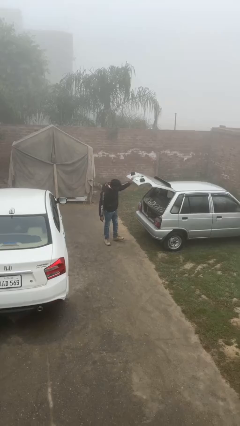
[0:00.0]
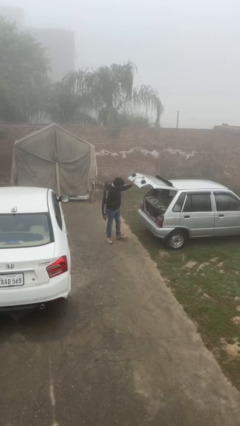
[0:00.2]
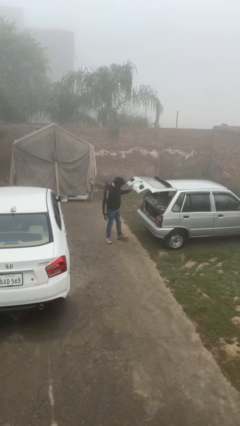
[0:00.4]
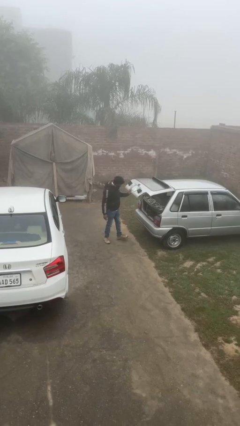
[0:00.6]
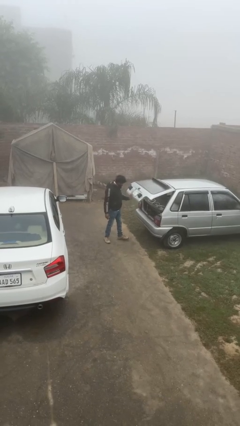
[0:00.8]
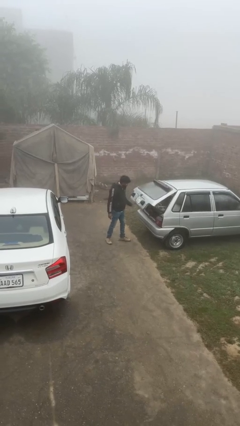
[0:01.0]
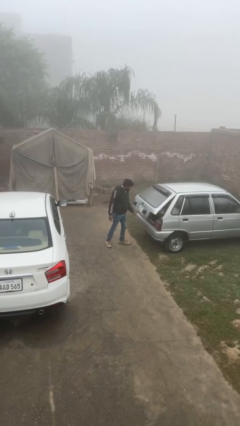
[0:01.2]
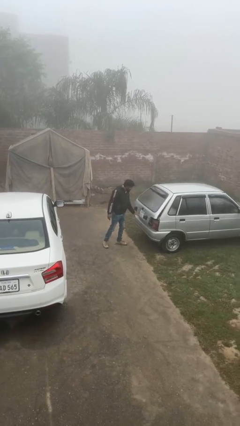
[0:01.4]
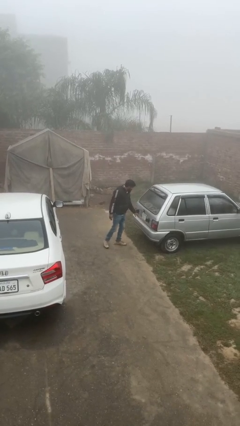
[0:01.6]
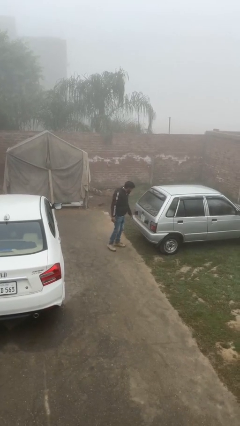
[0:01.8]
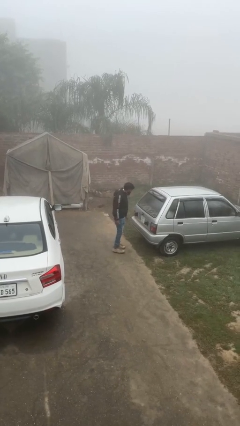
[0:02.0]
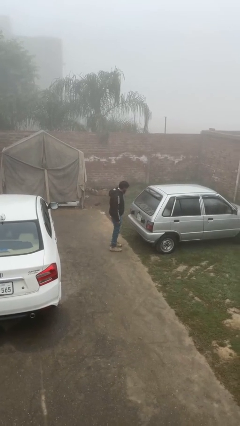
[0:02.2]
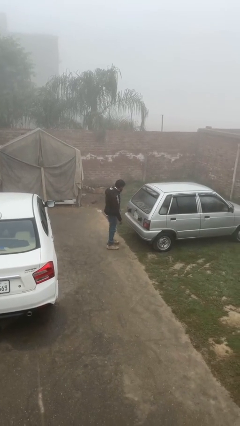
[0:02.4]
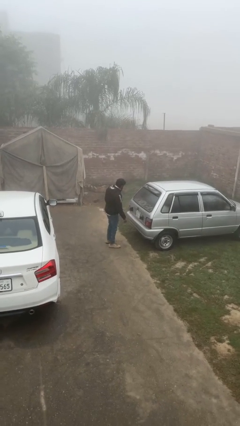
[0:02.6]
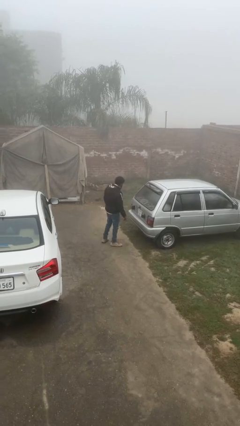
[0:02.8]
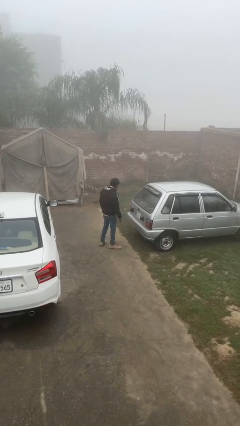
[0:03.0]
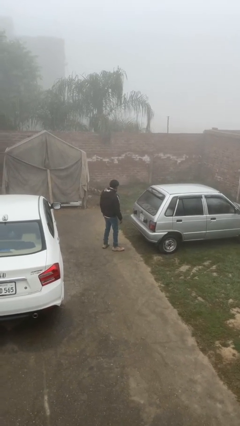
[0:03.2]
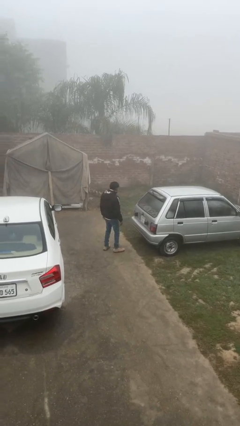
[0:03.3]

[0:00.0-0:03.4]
person closes car trunk

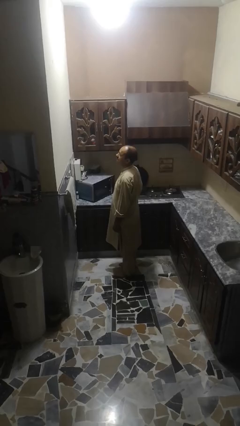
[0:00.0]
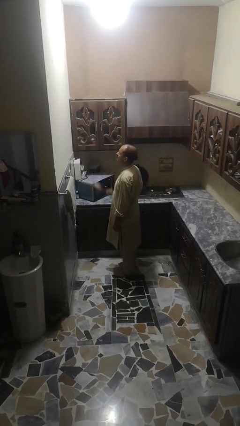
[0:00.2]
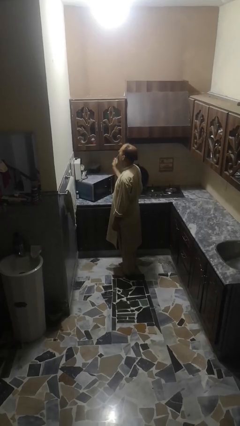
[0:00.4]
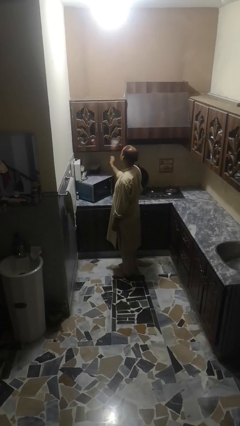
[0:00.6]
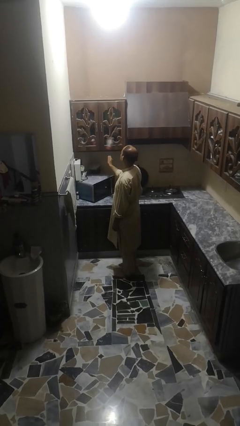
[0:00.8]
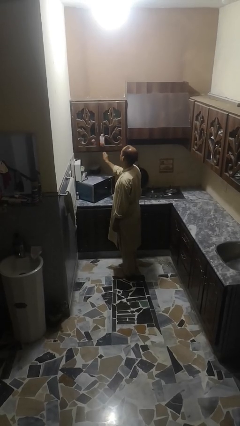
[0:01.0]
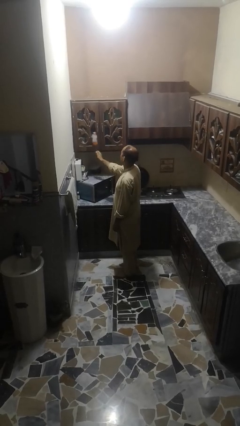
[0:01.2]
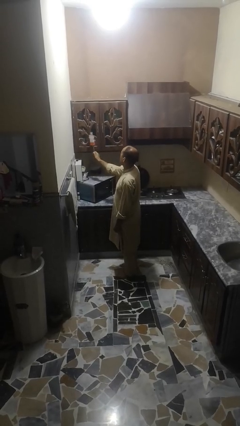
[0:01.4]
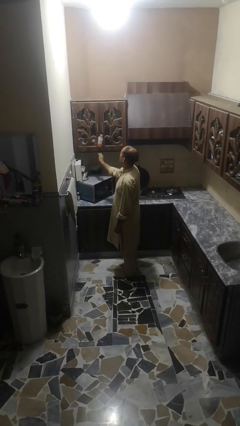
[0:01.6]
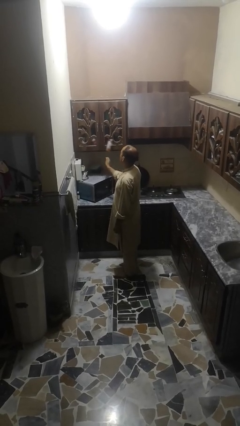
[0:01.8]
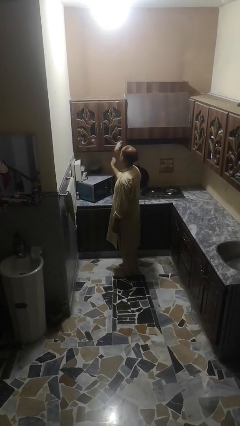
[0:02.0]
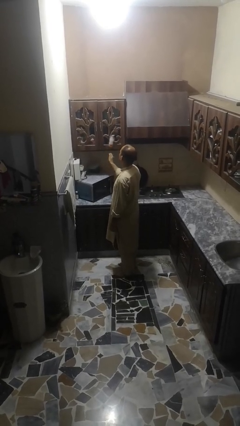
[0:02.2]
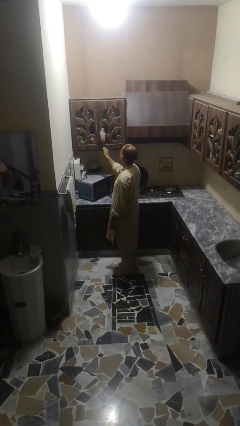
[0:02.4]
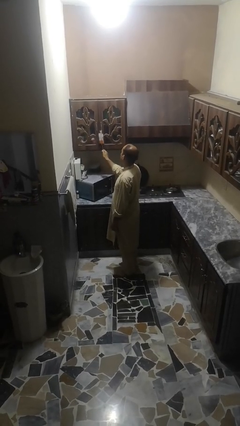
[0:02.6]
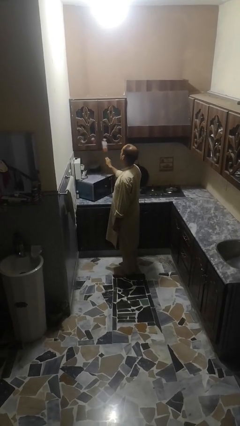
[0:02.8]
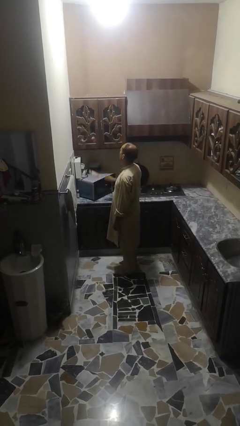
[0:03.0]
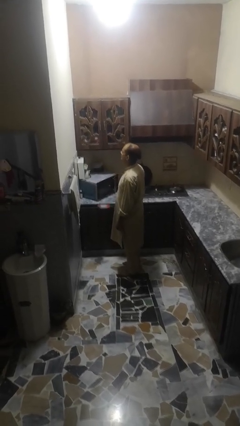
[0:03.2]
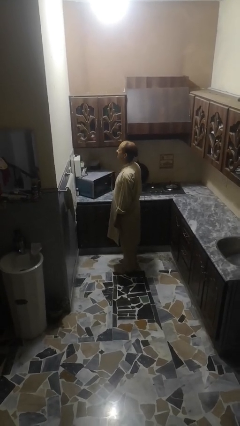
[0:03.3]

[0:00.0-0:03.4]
person dusts furniture

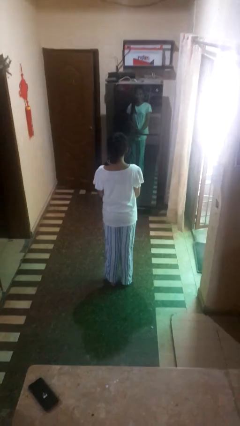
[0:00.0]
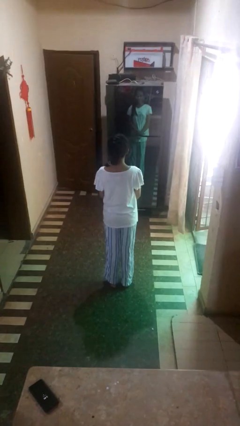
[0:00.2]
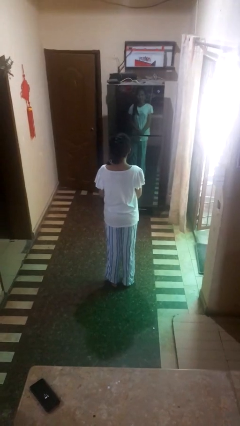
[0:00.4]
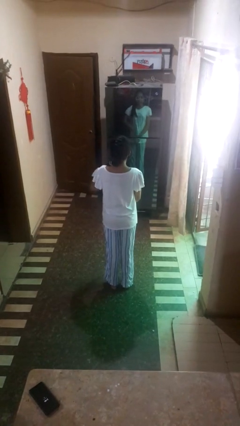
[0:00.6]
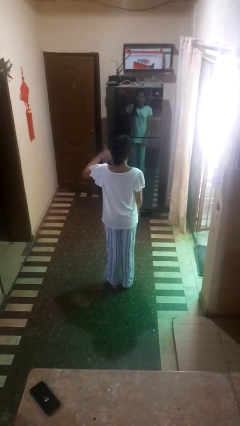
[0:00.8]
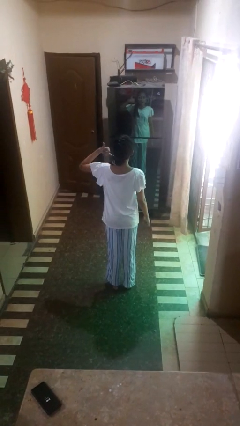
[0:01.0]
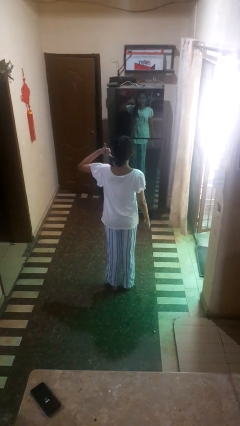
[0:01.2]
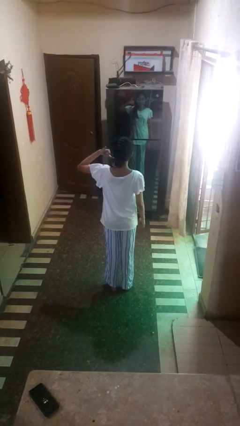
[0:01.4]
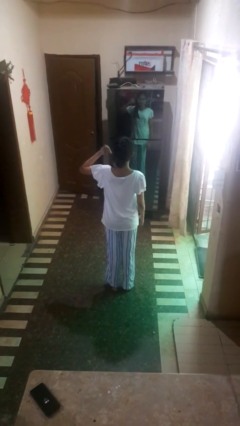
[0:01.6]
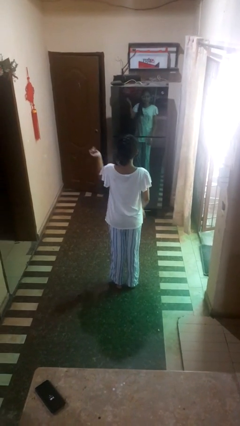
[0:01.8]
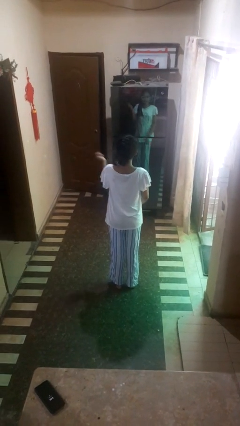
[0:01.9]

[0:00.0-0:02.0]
person gestures call me

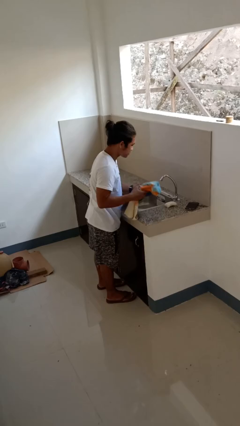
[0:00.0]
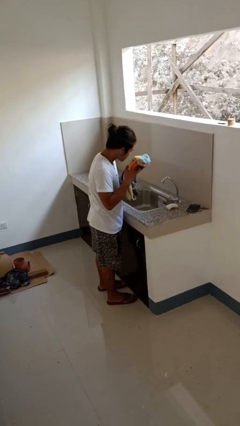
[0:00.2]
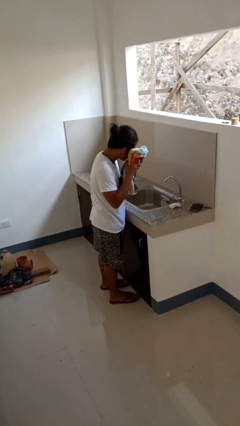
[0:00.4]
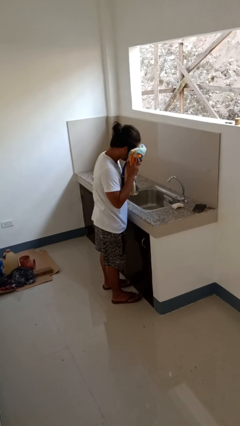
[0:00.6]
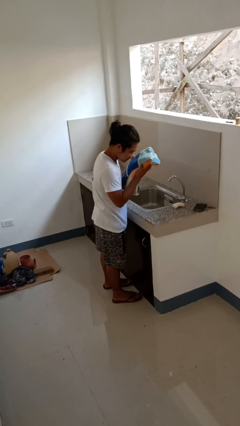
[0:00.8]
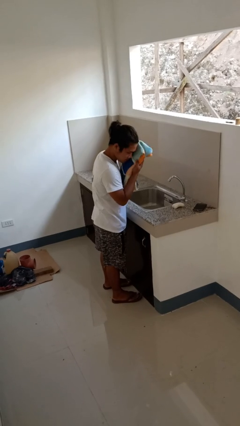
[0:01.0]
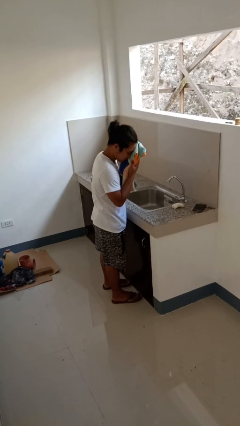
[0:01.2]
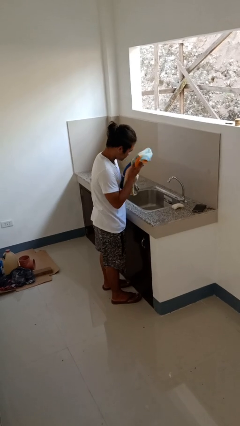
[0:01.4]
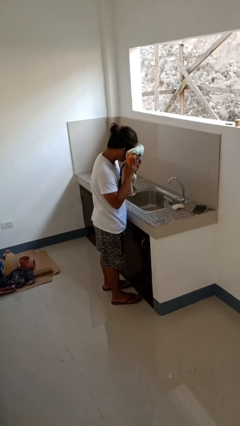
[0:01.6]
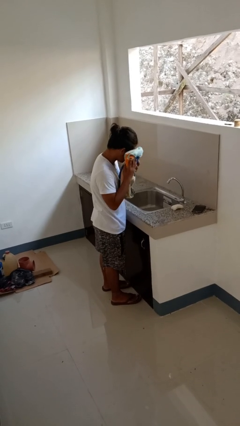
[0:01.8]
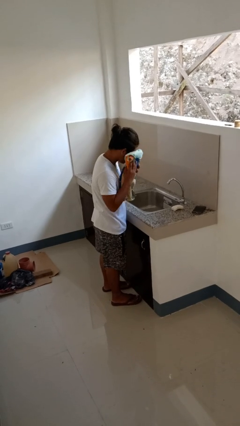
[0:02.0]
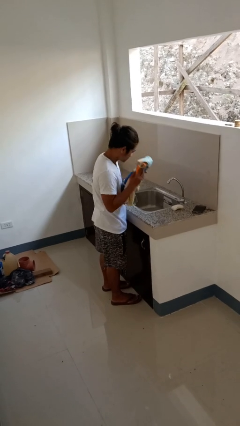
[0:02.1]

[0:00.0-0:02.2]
person dries face with towel

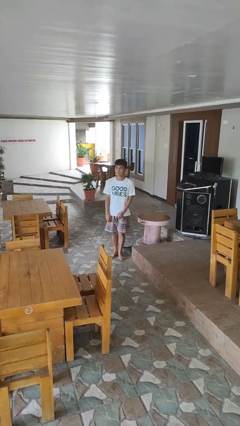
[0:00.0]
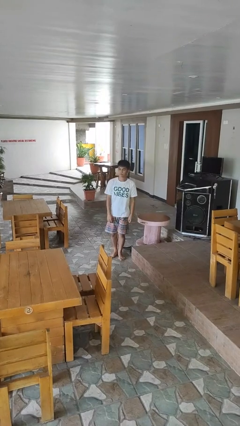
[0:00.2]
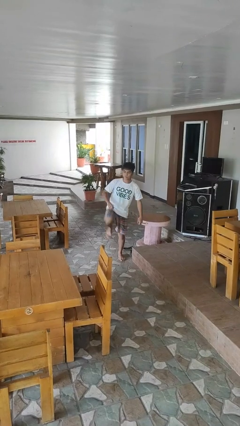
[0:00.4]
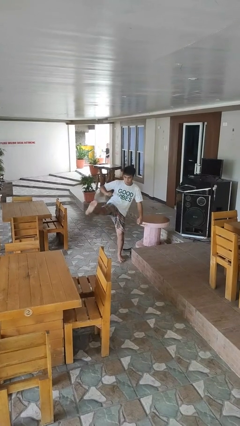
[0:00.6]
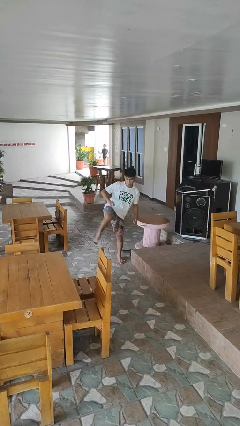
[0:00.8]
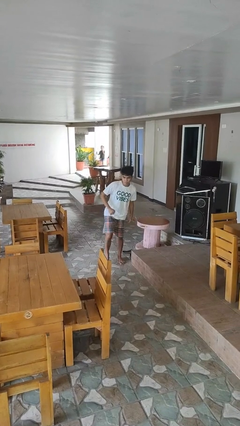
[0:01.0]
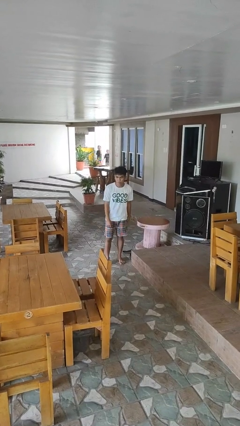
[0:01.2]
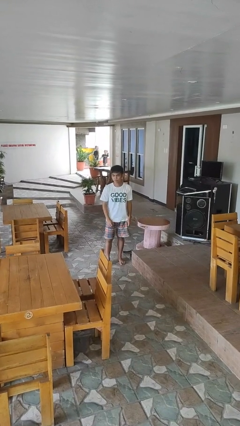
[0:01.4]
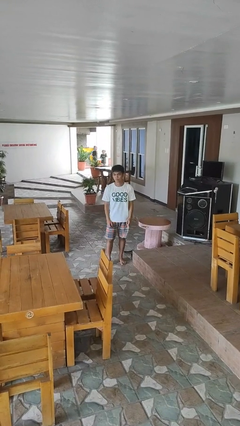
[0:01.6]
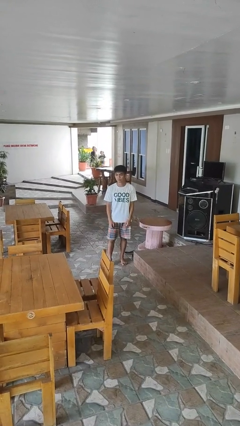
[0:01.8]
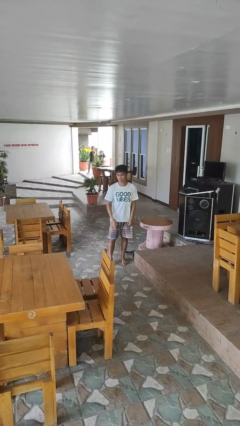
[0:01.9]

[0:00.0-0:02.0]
person karate kicks

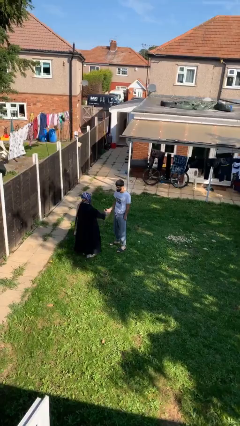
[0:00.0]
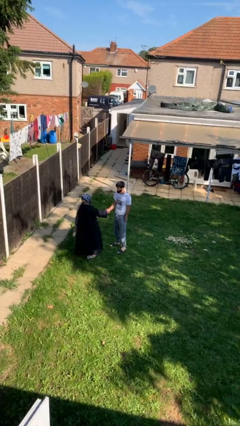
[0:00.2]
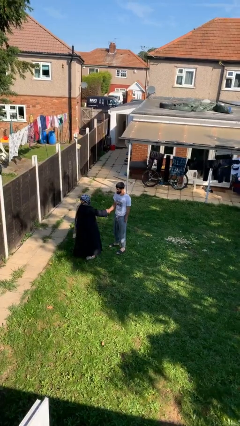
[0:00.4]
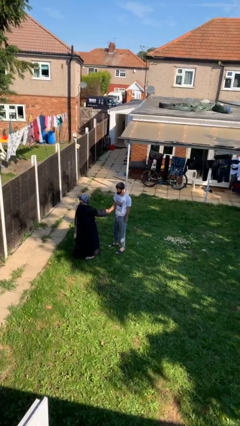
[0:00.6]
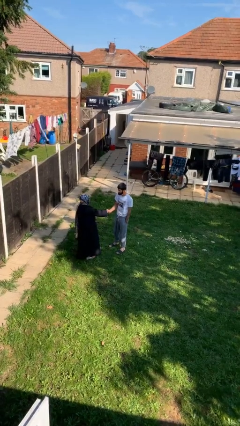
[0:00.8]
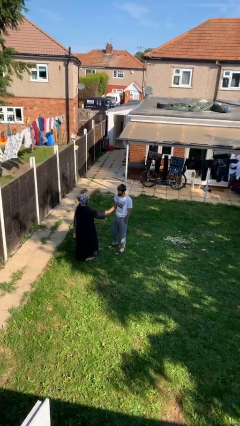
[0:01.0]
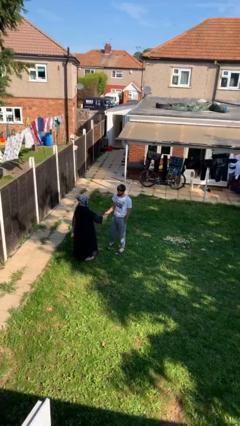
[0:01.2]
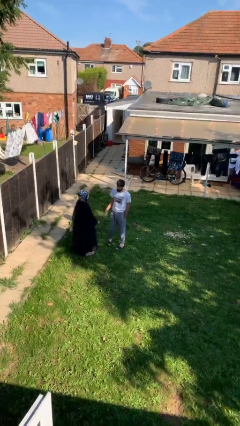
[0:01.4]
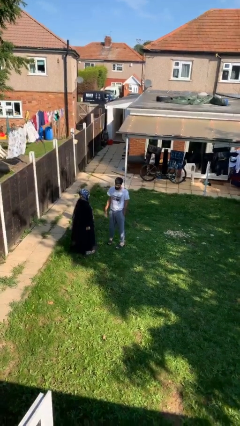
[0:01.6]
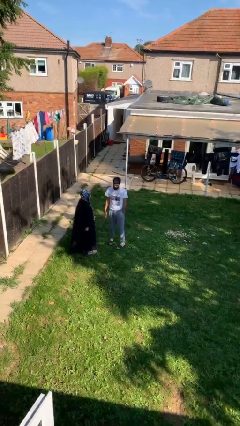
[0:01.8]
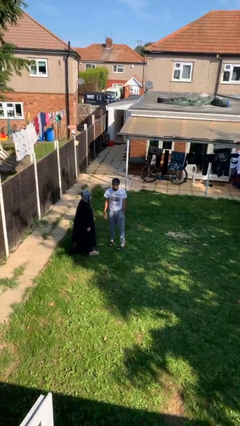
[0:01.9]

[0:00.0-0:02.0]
person shakes hand

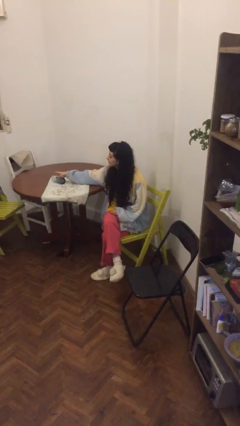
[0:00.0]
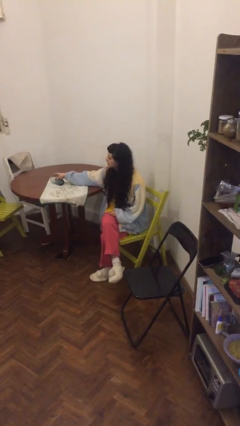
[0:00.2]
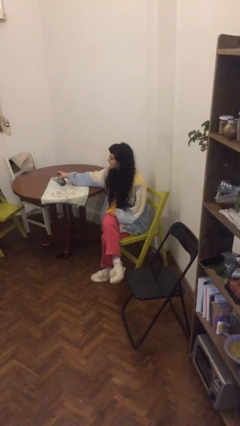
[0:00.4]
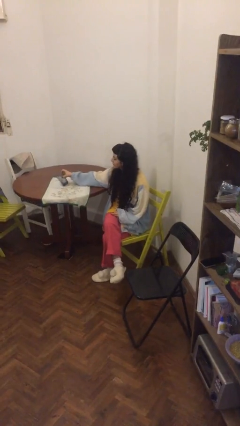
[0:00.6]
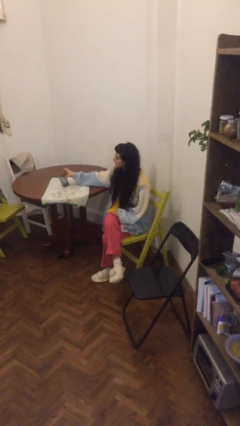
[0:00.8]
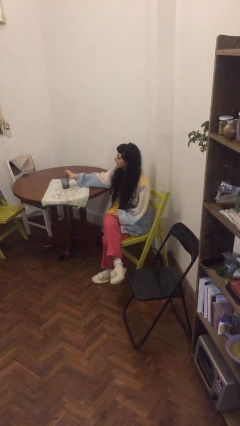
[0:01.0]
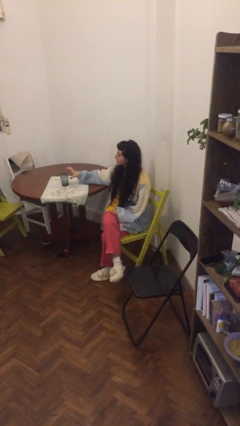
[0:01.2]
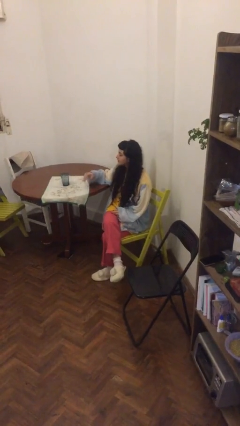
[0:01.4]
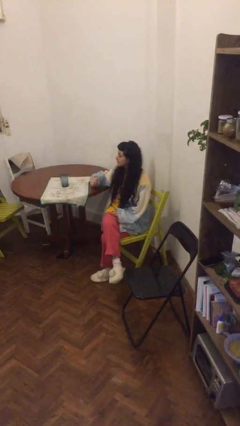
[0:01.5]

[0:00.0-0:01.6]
person sets upright glass
